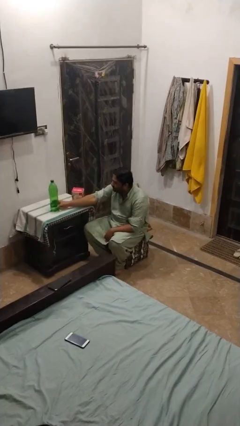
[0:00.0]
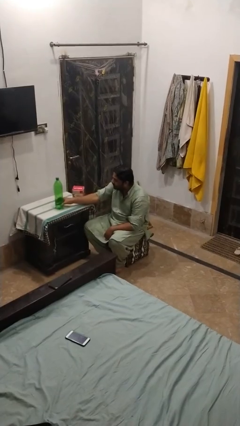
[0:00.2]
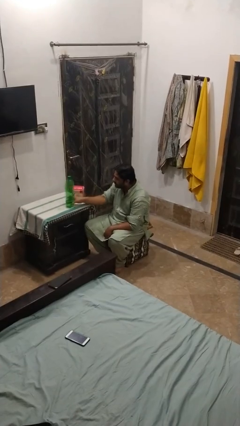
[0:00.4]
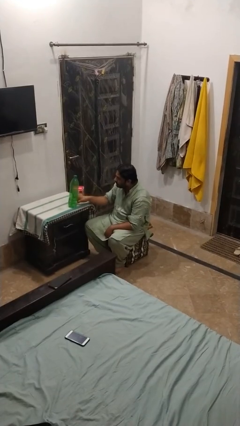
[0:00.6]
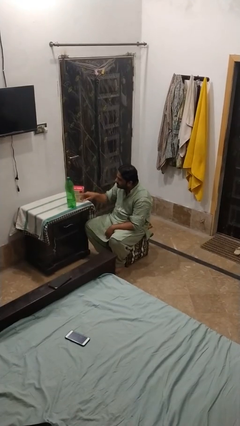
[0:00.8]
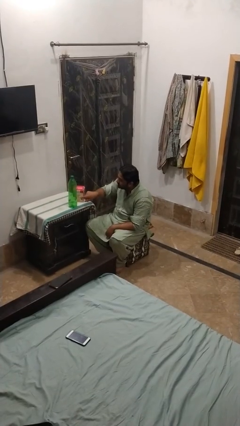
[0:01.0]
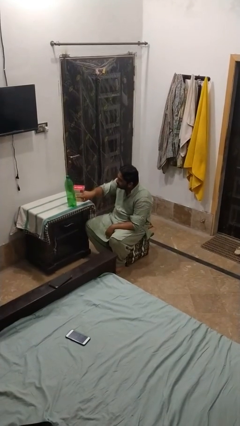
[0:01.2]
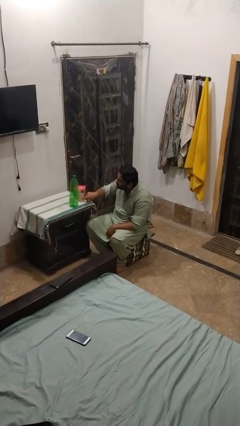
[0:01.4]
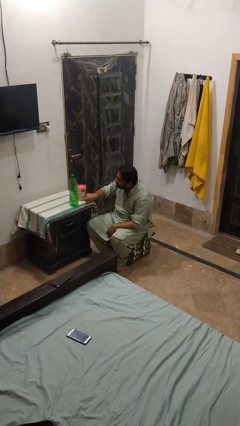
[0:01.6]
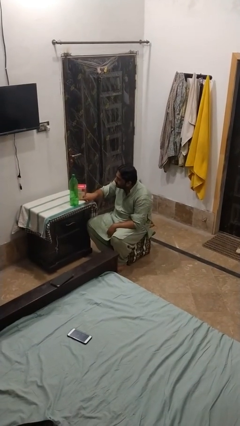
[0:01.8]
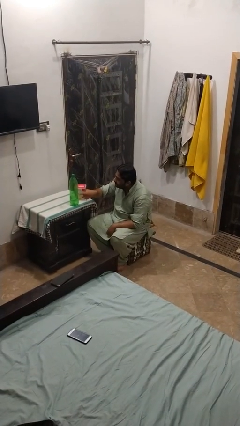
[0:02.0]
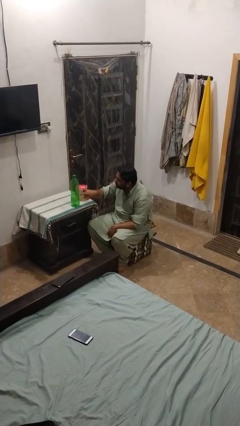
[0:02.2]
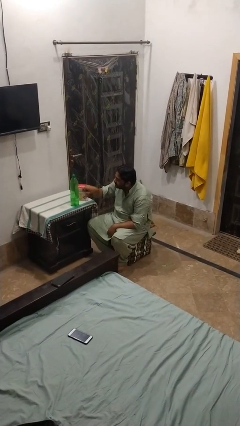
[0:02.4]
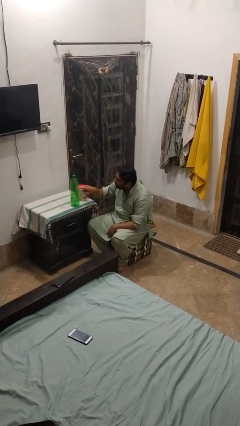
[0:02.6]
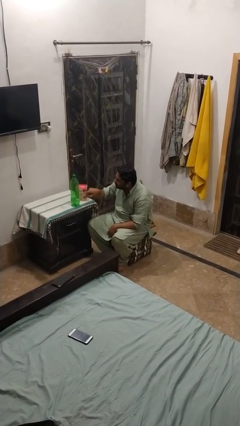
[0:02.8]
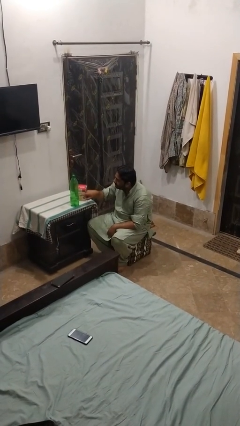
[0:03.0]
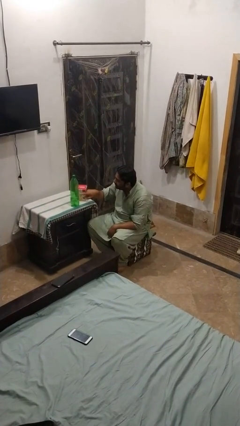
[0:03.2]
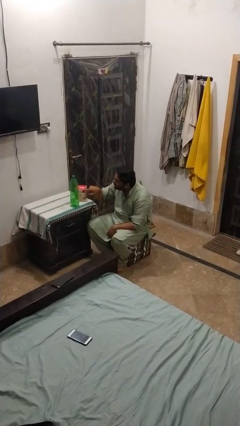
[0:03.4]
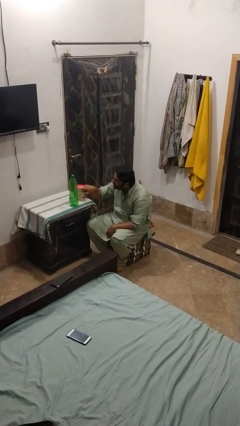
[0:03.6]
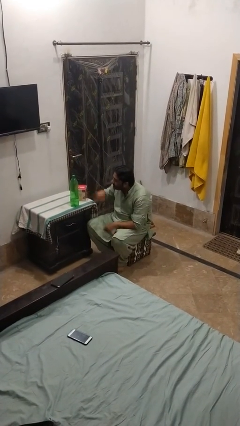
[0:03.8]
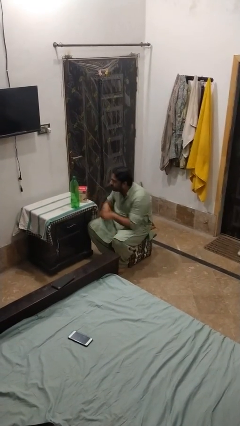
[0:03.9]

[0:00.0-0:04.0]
person taps object with finger

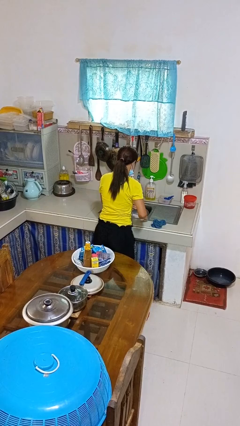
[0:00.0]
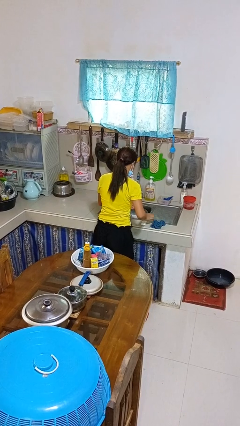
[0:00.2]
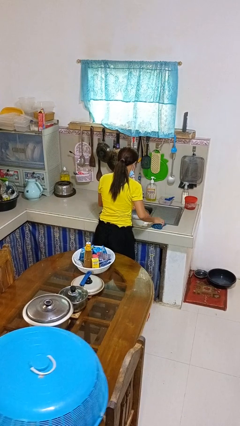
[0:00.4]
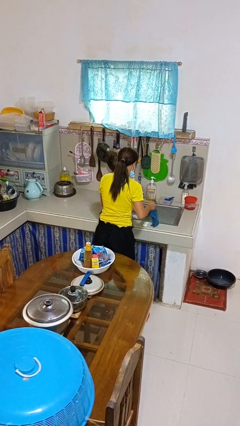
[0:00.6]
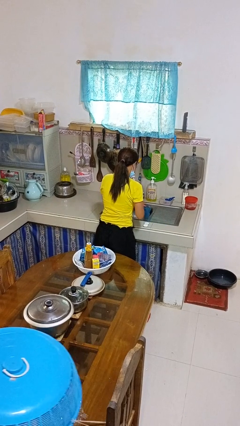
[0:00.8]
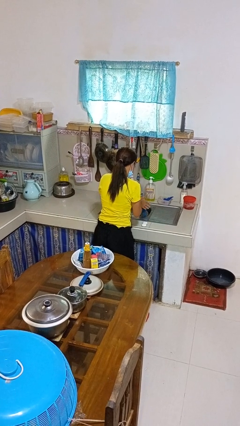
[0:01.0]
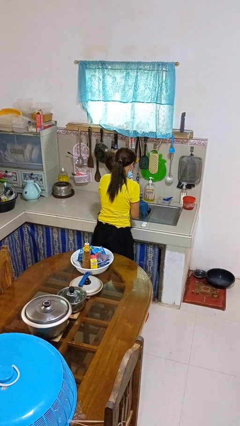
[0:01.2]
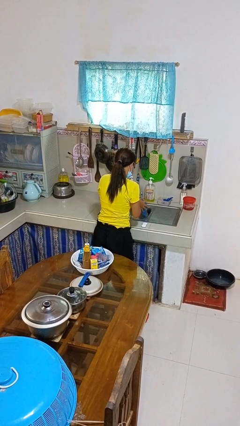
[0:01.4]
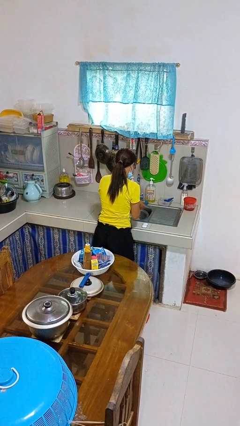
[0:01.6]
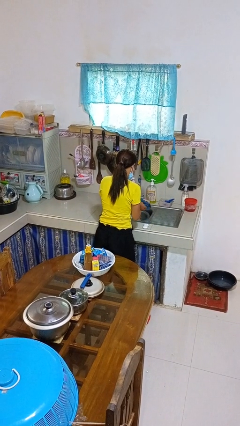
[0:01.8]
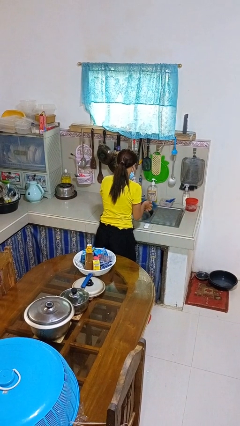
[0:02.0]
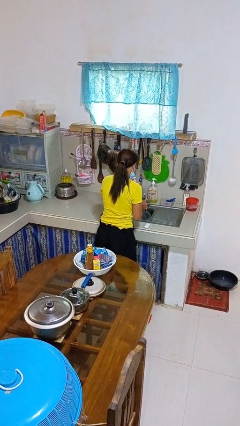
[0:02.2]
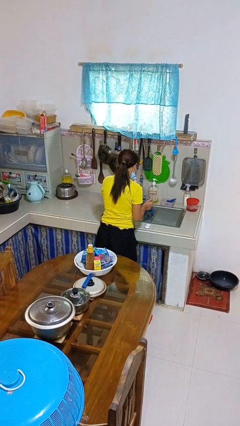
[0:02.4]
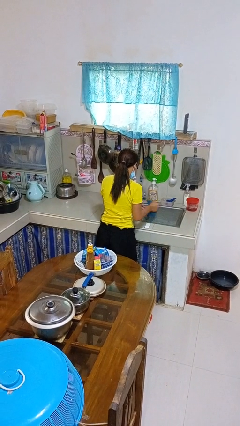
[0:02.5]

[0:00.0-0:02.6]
person dries hands with towel

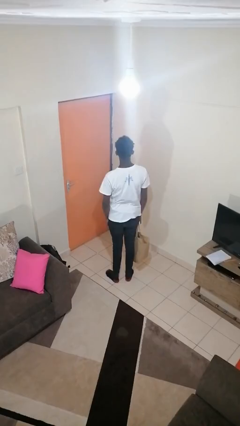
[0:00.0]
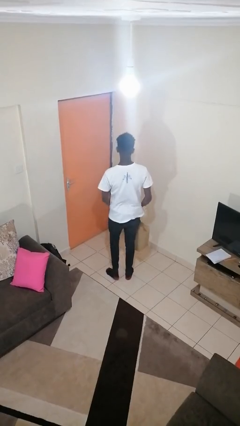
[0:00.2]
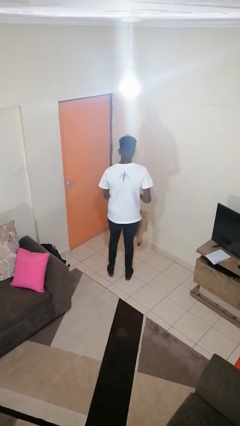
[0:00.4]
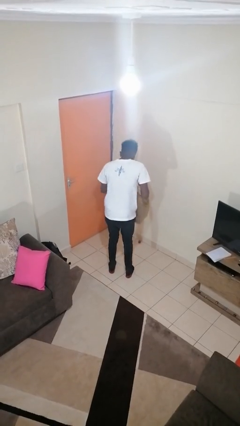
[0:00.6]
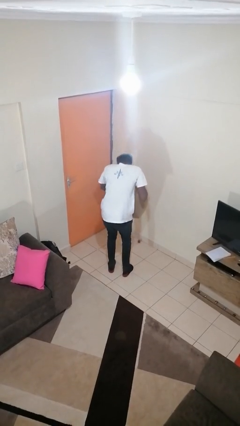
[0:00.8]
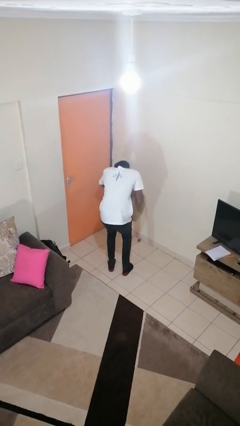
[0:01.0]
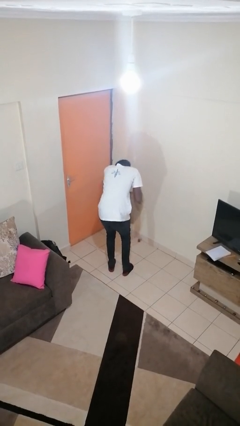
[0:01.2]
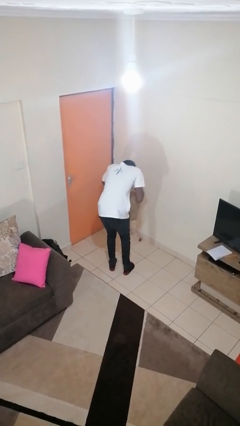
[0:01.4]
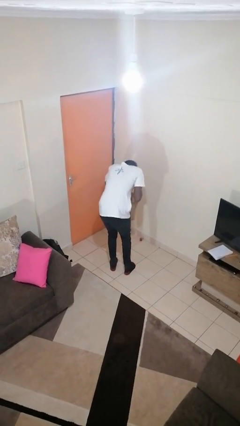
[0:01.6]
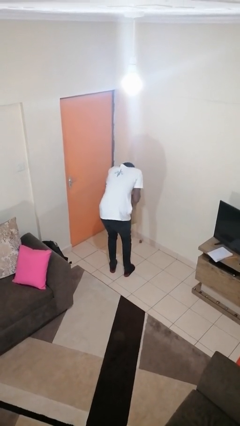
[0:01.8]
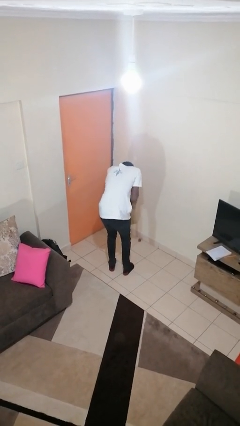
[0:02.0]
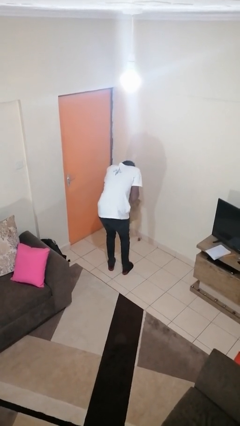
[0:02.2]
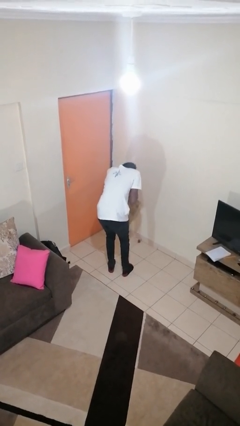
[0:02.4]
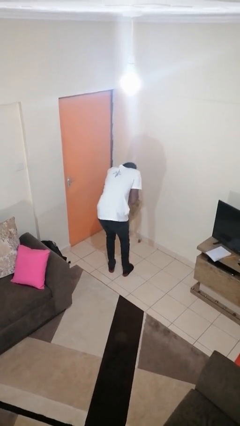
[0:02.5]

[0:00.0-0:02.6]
person searches in bag

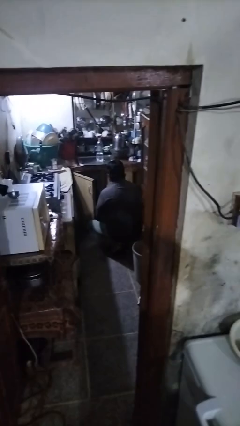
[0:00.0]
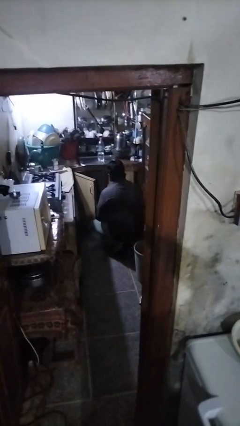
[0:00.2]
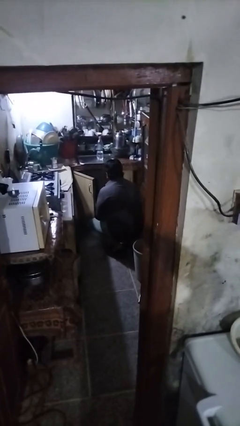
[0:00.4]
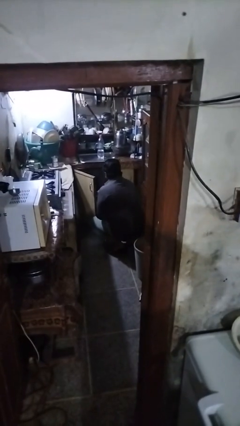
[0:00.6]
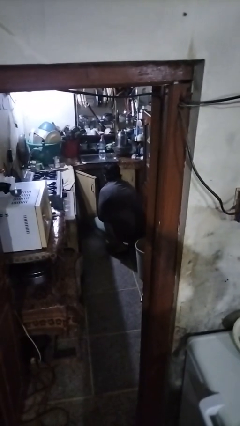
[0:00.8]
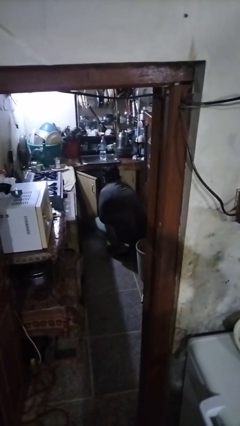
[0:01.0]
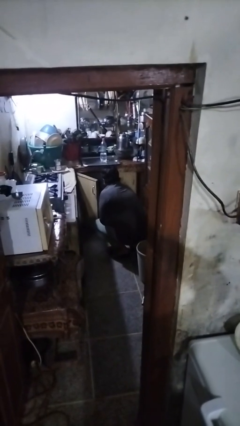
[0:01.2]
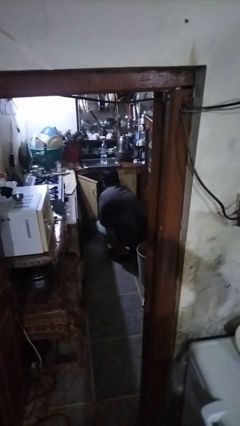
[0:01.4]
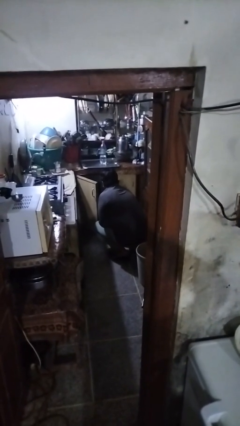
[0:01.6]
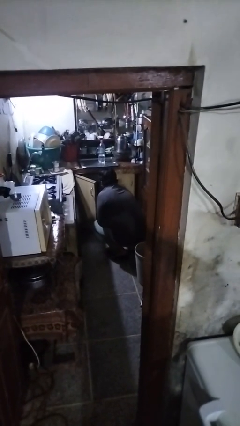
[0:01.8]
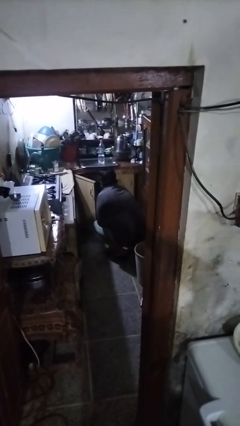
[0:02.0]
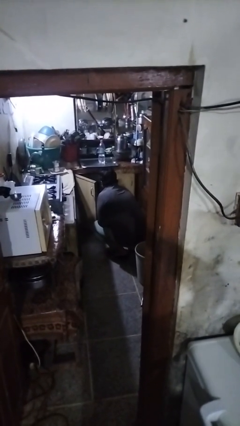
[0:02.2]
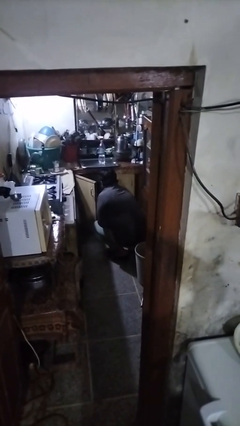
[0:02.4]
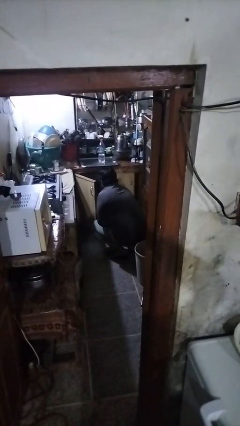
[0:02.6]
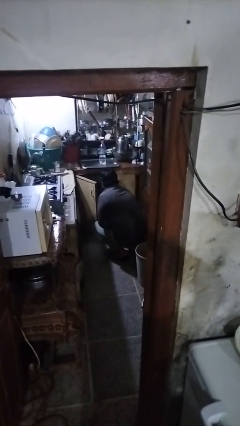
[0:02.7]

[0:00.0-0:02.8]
person puts object in cabinet

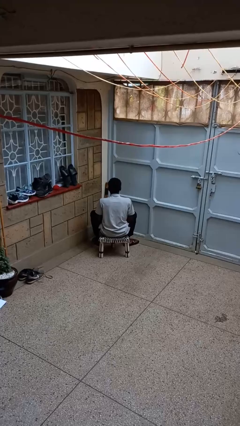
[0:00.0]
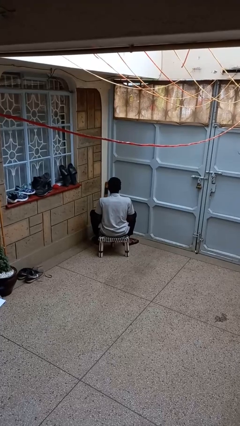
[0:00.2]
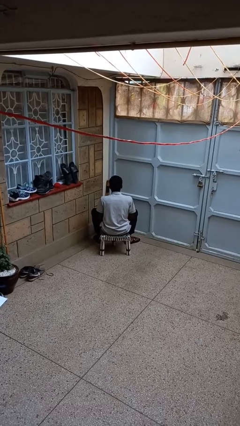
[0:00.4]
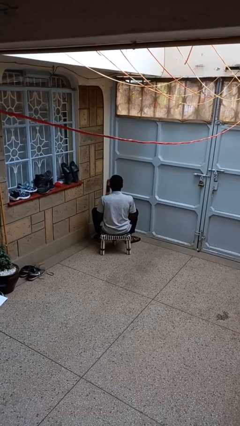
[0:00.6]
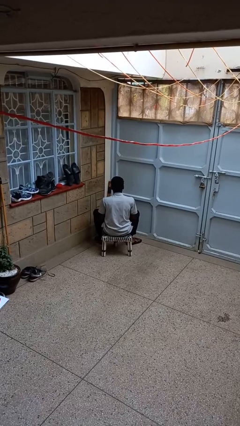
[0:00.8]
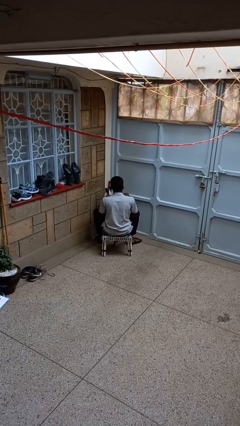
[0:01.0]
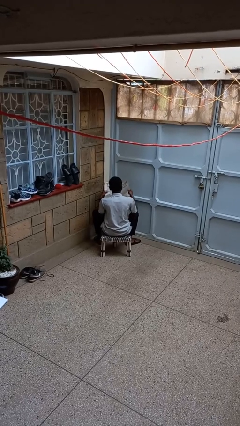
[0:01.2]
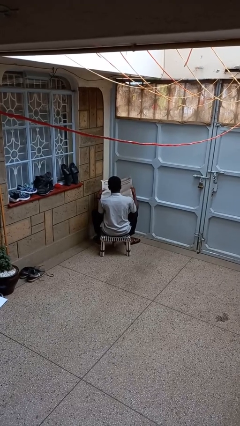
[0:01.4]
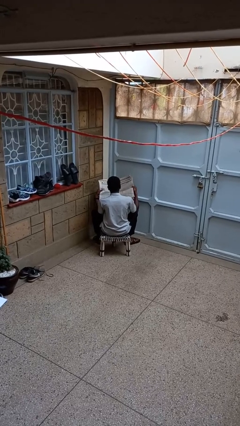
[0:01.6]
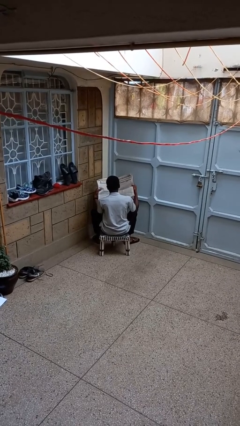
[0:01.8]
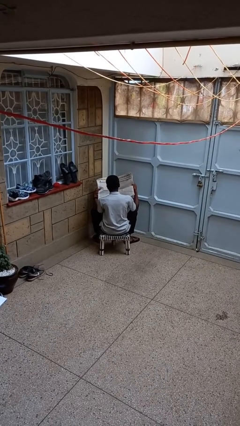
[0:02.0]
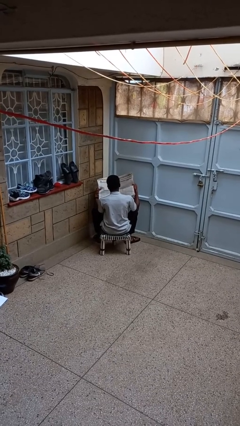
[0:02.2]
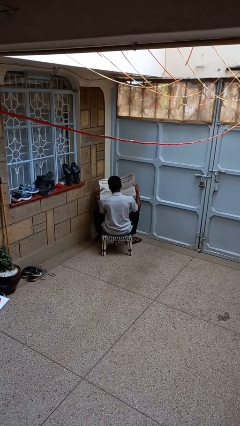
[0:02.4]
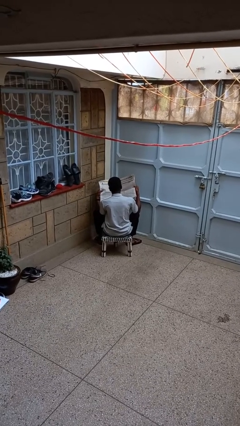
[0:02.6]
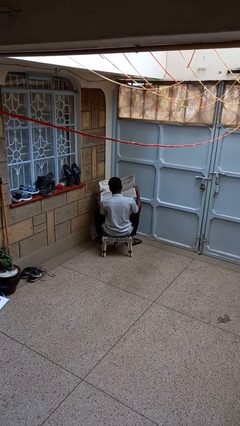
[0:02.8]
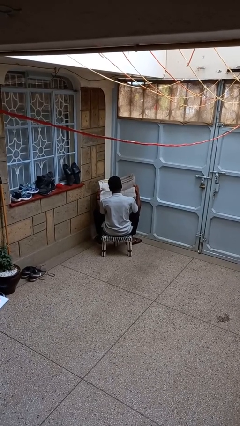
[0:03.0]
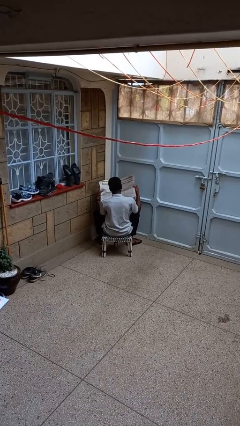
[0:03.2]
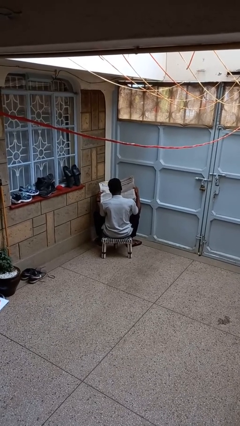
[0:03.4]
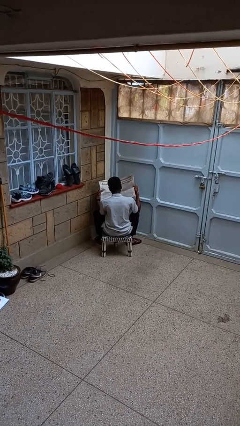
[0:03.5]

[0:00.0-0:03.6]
person reads newspaper

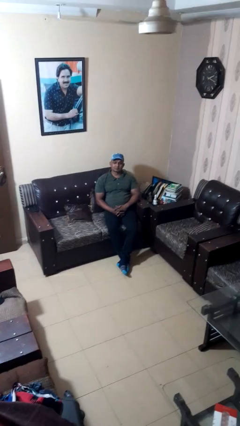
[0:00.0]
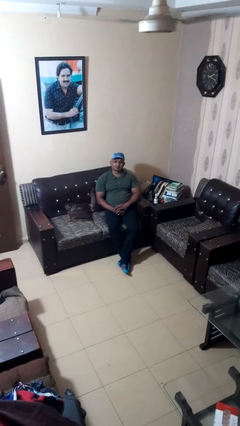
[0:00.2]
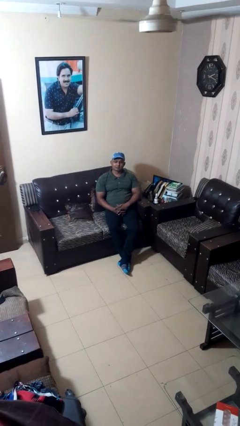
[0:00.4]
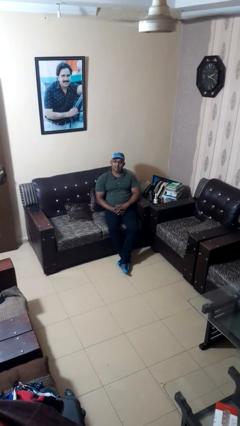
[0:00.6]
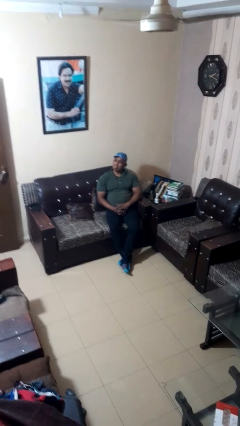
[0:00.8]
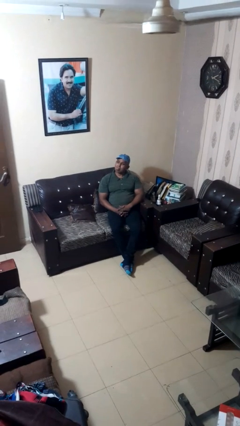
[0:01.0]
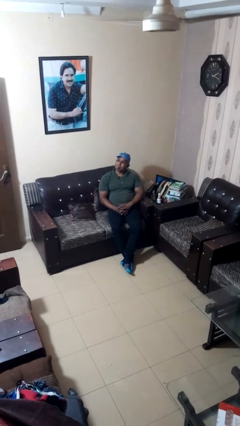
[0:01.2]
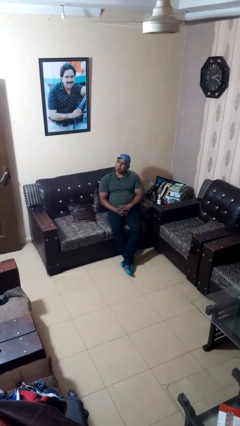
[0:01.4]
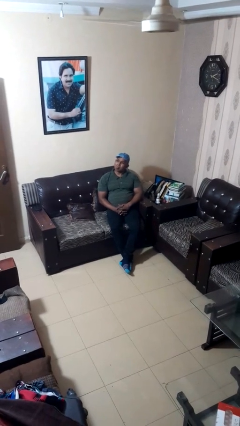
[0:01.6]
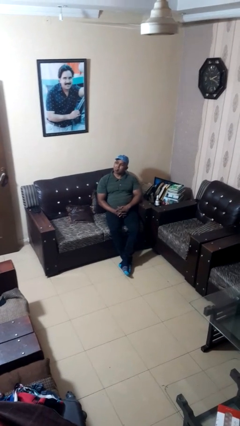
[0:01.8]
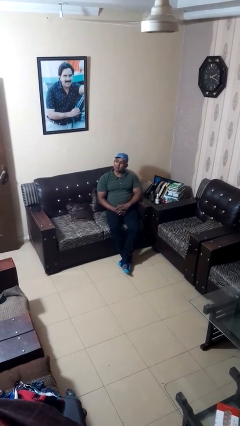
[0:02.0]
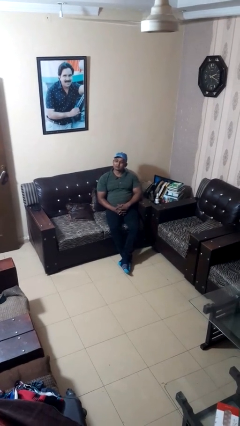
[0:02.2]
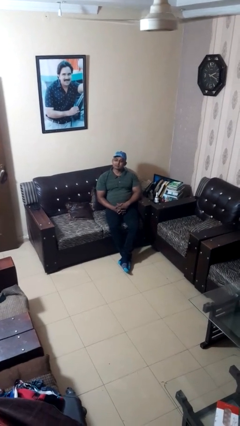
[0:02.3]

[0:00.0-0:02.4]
person sticks out tongue
